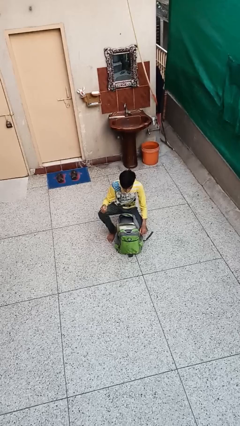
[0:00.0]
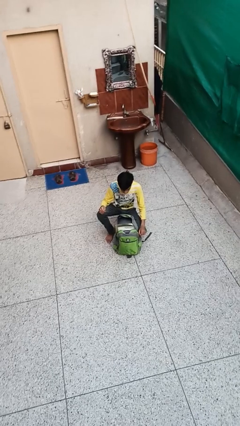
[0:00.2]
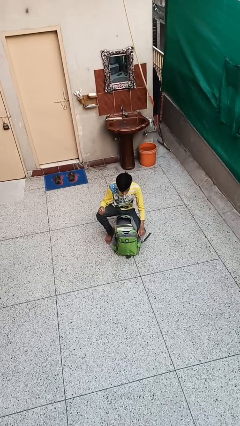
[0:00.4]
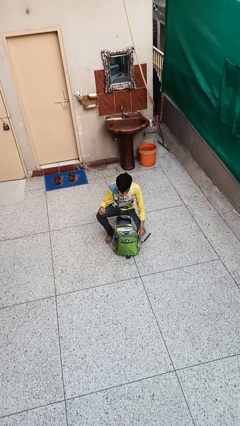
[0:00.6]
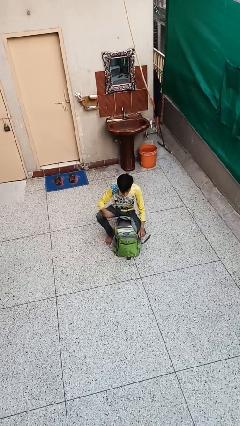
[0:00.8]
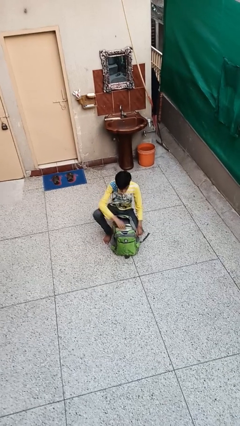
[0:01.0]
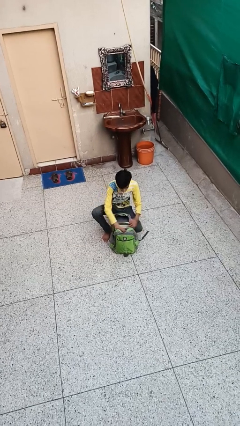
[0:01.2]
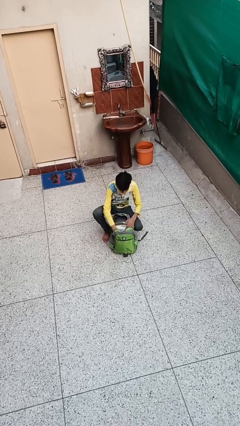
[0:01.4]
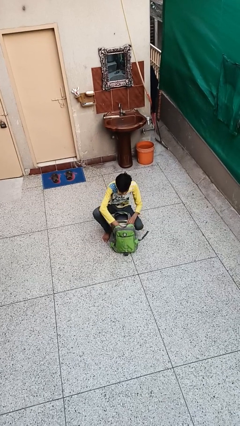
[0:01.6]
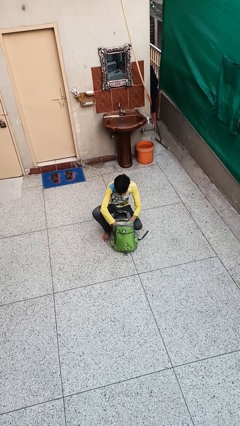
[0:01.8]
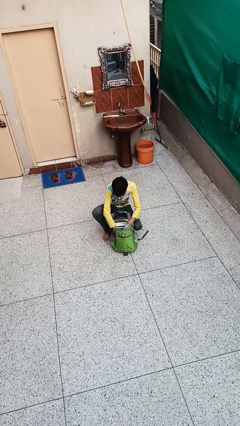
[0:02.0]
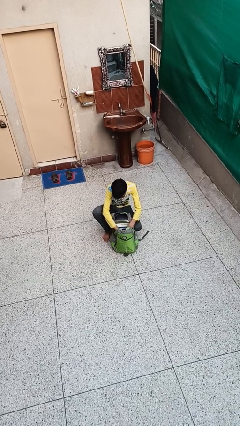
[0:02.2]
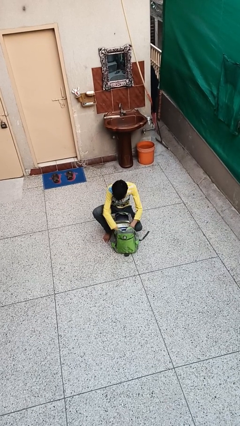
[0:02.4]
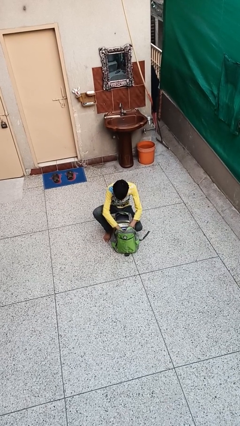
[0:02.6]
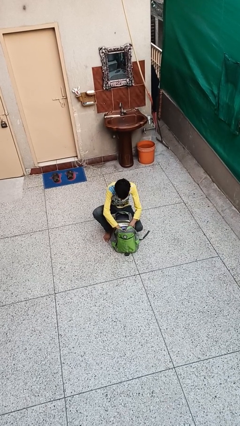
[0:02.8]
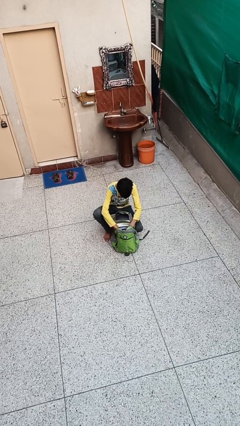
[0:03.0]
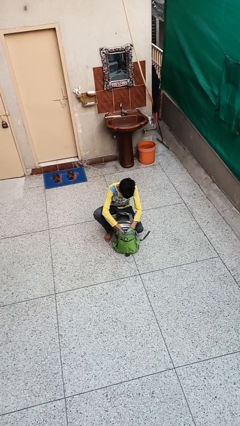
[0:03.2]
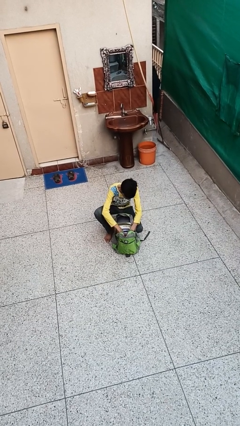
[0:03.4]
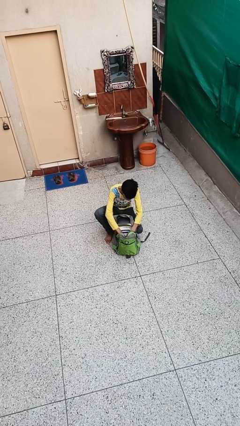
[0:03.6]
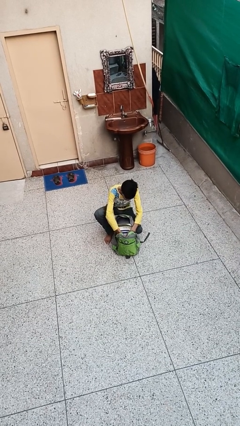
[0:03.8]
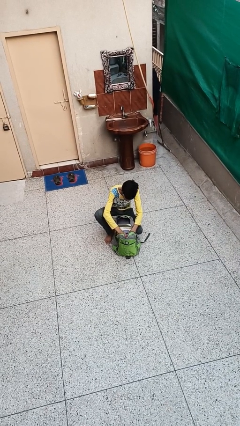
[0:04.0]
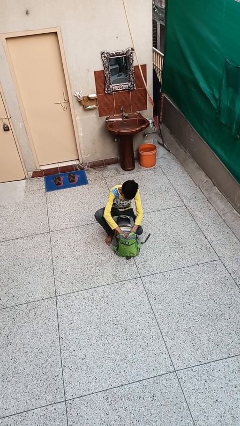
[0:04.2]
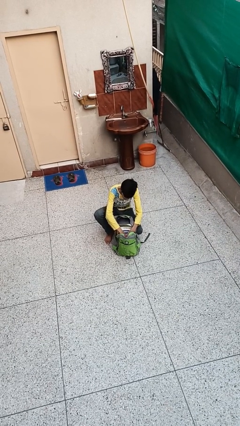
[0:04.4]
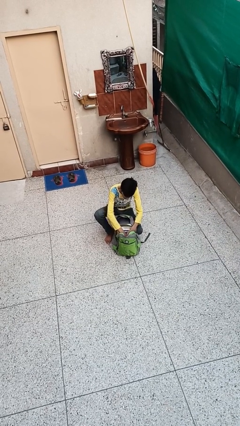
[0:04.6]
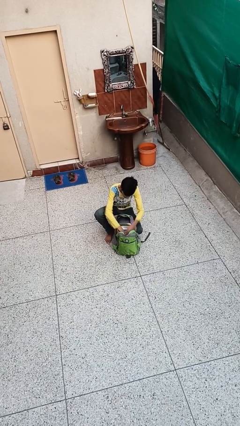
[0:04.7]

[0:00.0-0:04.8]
person searches in backpack

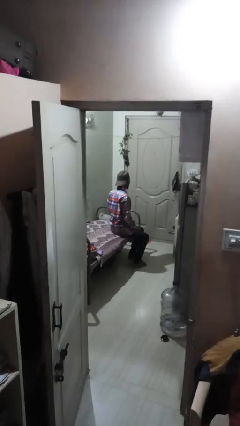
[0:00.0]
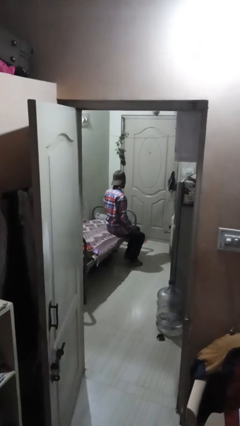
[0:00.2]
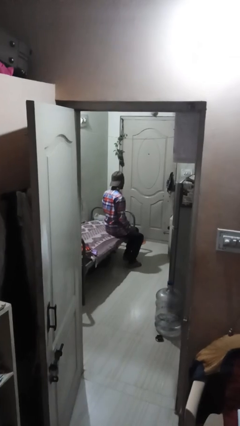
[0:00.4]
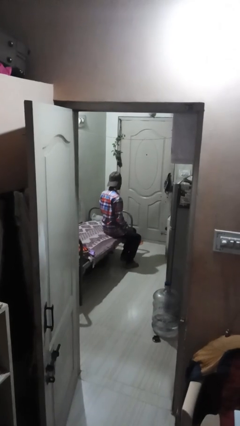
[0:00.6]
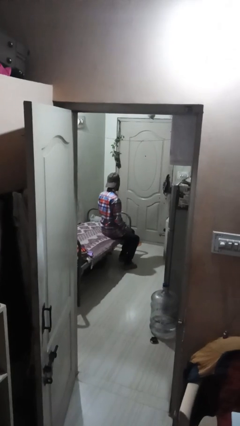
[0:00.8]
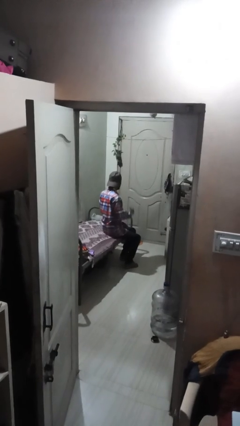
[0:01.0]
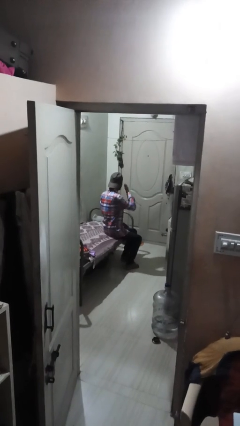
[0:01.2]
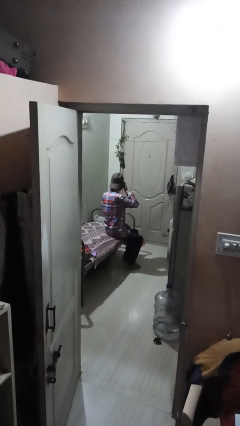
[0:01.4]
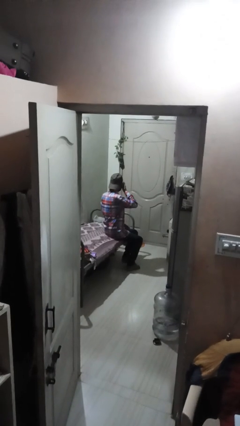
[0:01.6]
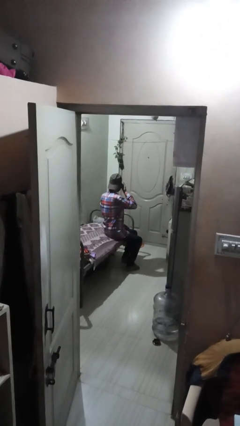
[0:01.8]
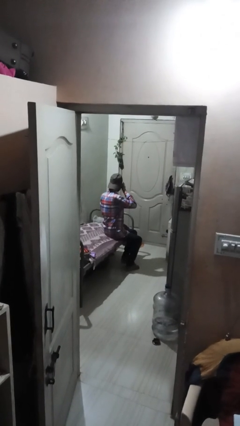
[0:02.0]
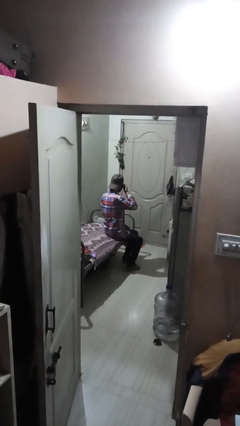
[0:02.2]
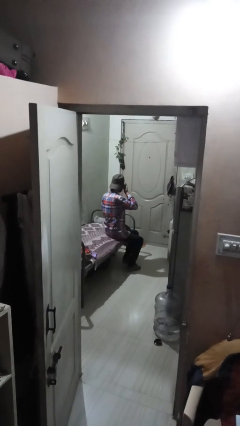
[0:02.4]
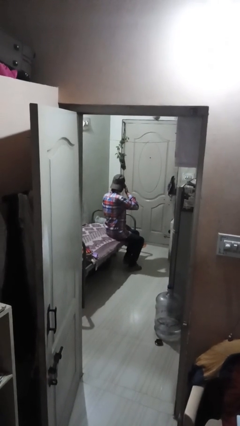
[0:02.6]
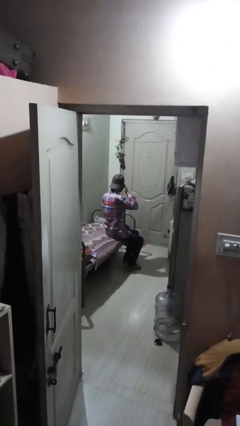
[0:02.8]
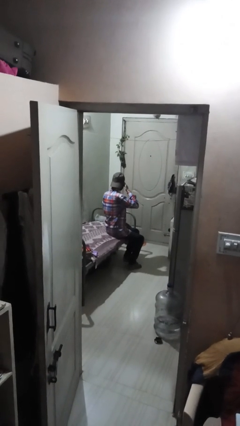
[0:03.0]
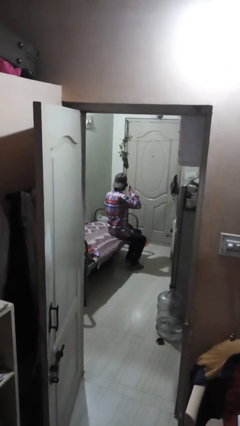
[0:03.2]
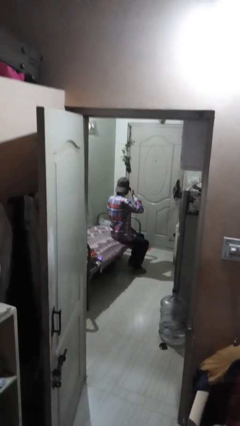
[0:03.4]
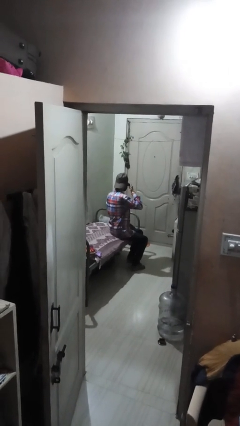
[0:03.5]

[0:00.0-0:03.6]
person rubs eyes

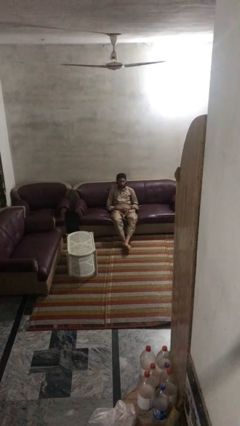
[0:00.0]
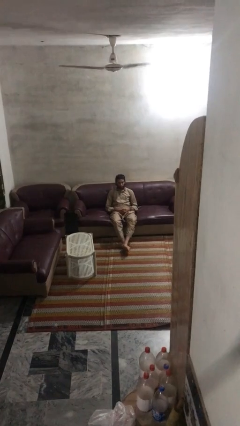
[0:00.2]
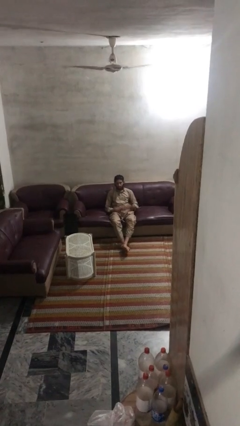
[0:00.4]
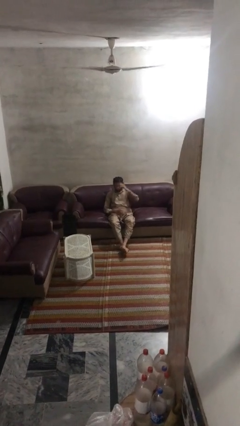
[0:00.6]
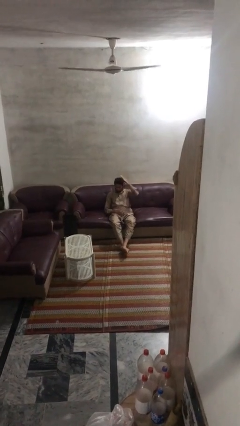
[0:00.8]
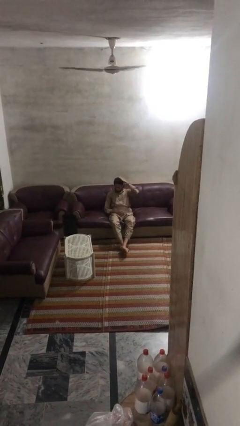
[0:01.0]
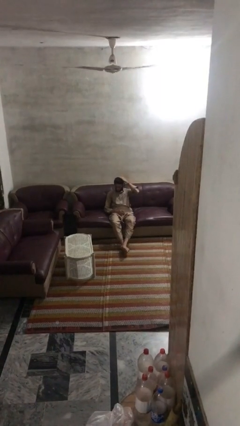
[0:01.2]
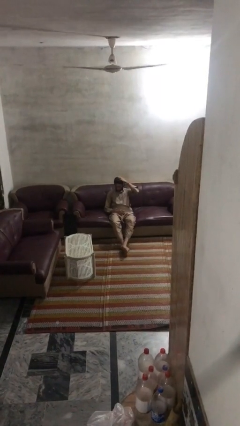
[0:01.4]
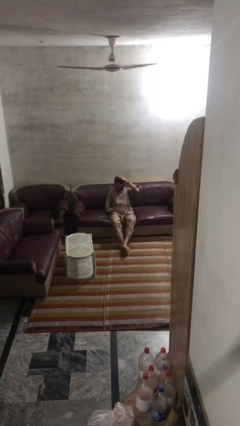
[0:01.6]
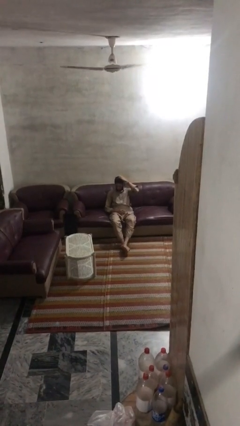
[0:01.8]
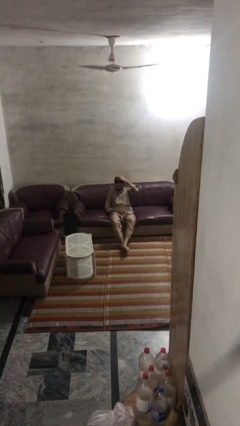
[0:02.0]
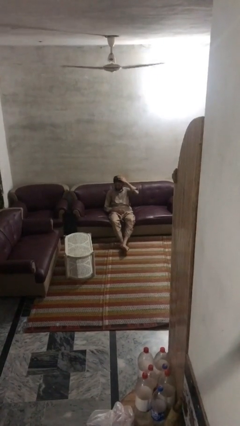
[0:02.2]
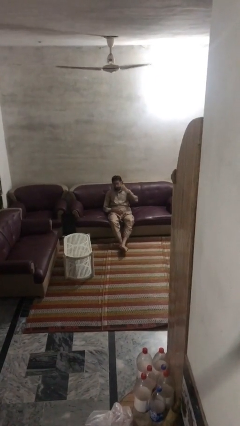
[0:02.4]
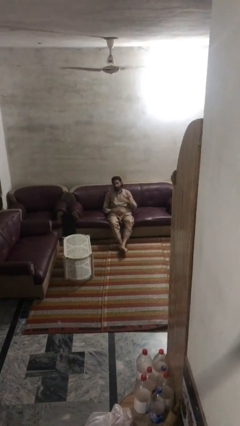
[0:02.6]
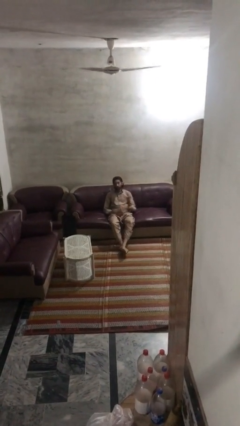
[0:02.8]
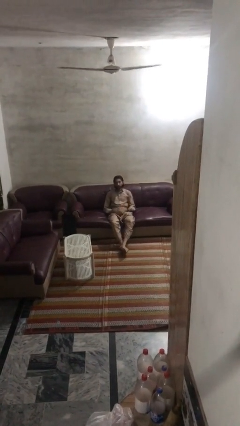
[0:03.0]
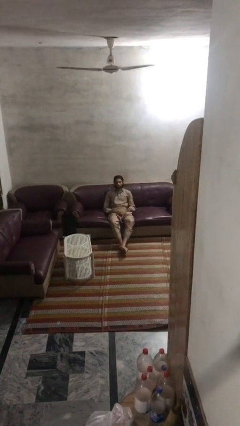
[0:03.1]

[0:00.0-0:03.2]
person pats head

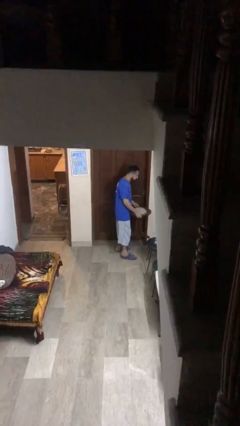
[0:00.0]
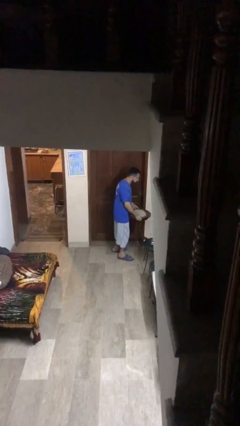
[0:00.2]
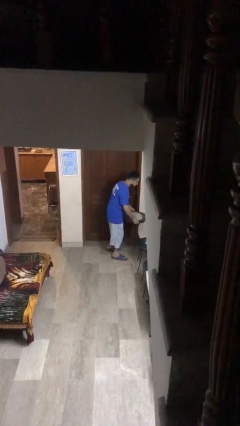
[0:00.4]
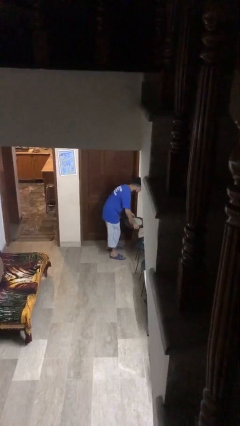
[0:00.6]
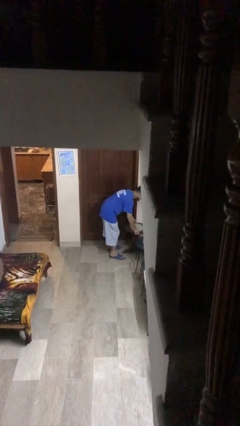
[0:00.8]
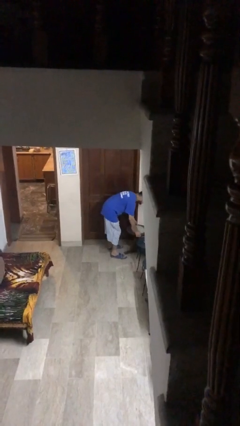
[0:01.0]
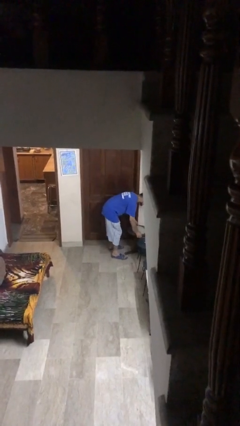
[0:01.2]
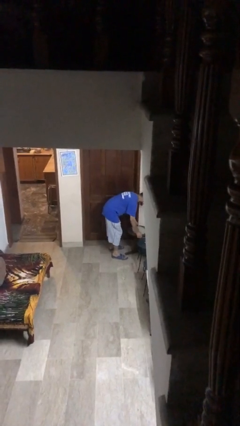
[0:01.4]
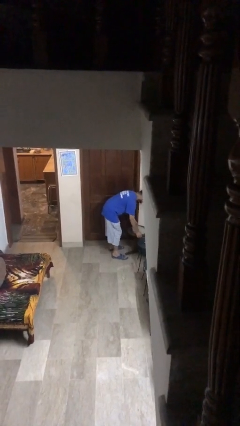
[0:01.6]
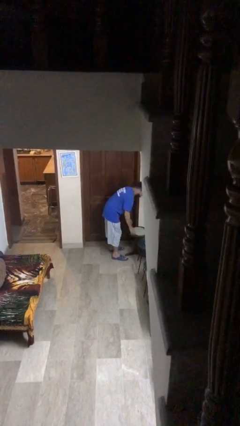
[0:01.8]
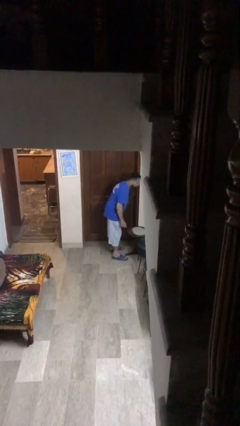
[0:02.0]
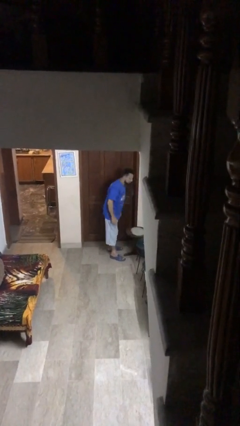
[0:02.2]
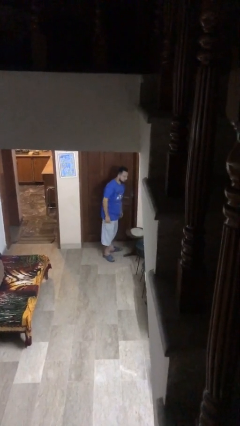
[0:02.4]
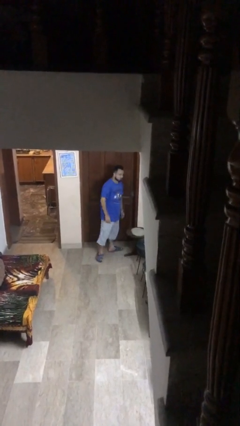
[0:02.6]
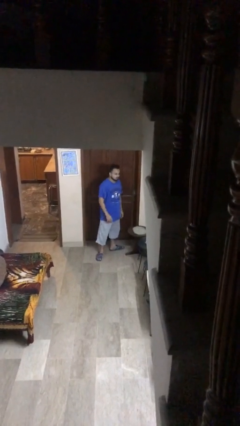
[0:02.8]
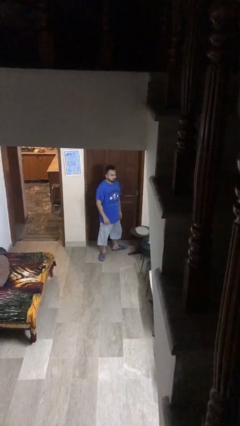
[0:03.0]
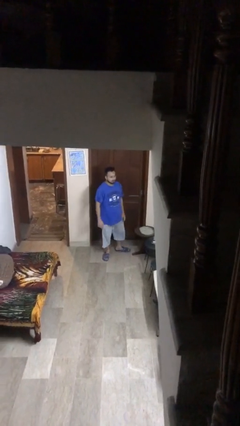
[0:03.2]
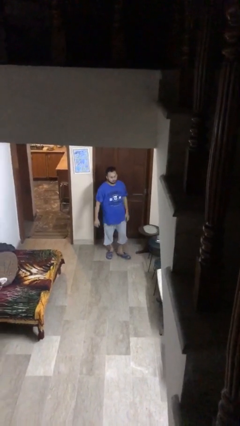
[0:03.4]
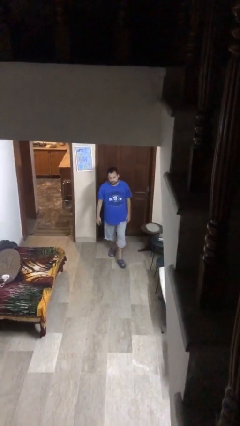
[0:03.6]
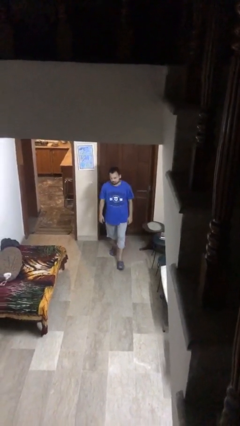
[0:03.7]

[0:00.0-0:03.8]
person puts down object on floor

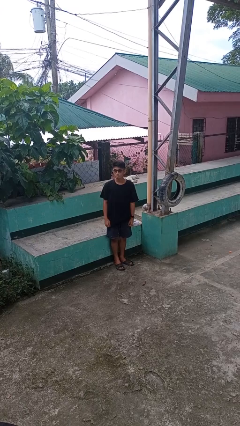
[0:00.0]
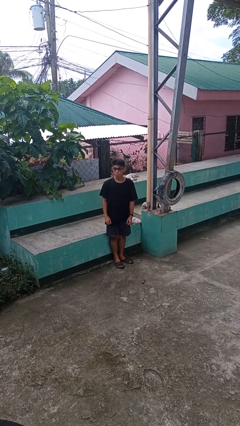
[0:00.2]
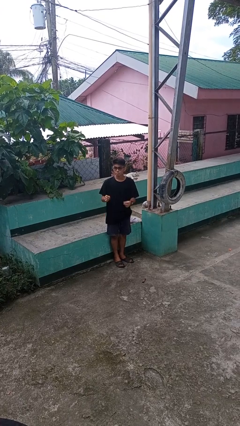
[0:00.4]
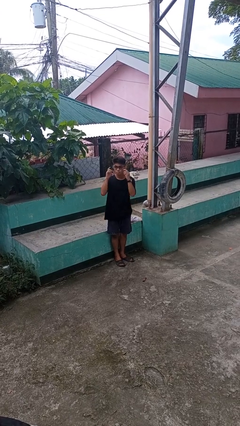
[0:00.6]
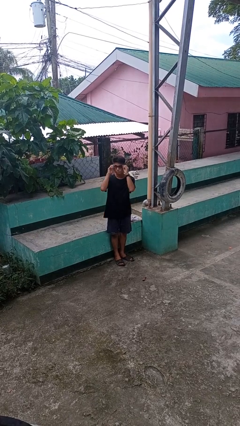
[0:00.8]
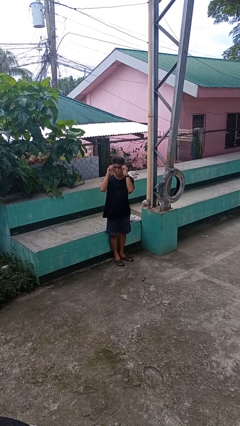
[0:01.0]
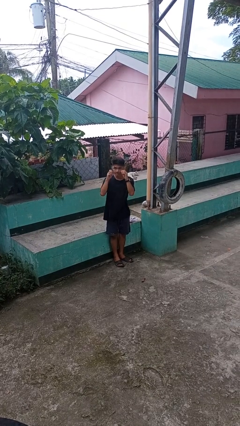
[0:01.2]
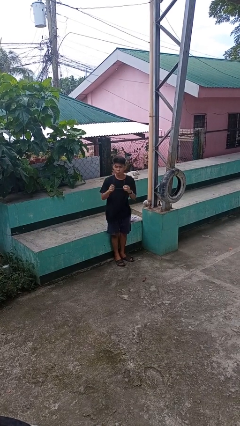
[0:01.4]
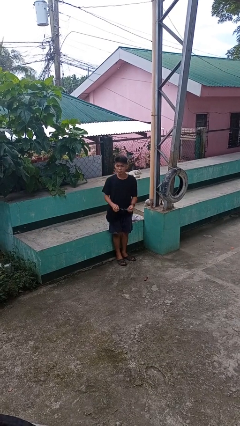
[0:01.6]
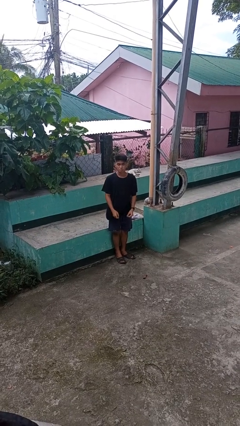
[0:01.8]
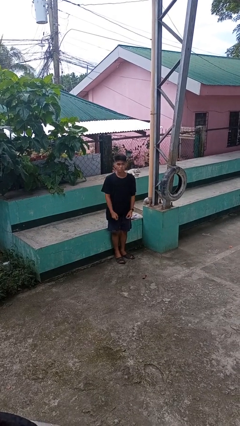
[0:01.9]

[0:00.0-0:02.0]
person takes off glasses

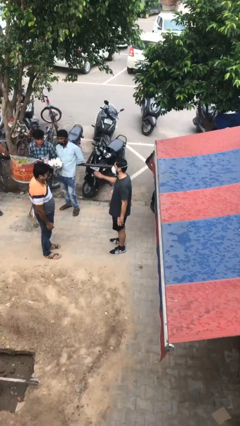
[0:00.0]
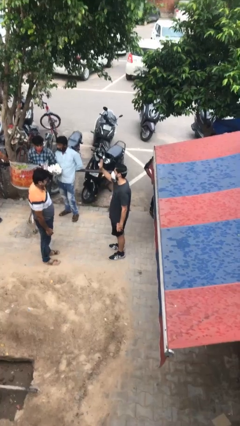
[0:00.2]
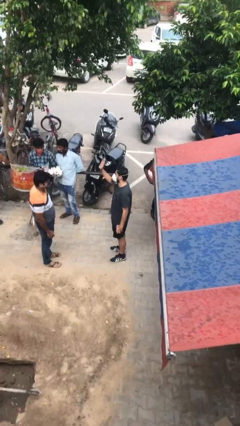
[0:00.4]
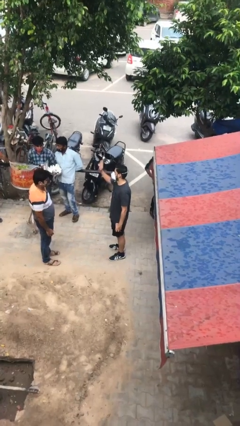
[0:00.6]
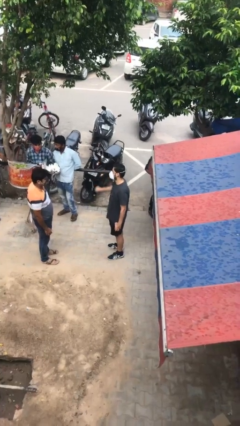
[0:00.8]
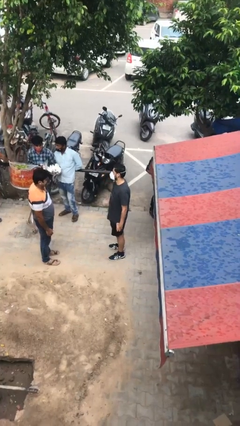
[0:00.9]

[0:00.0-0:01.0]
person waves at person
